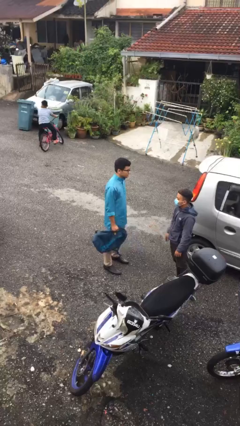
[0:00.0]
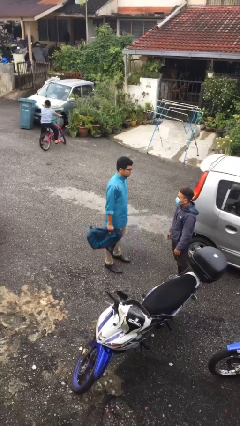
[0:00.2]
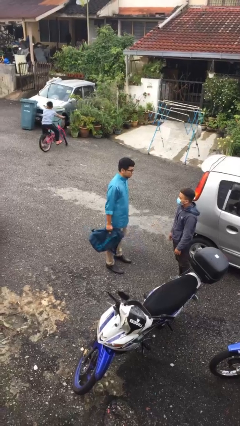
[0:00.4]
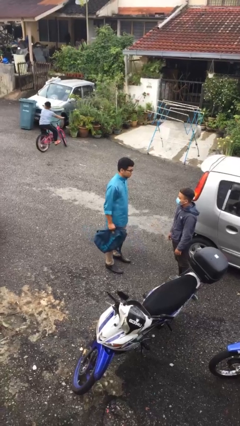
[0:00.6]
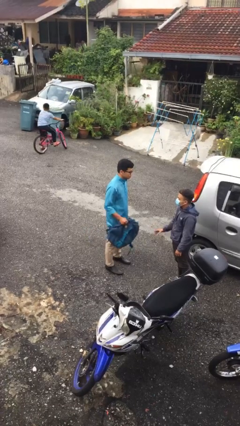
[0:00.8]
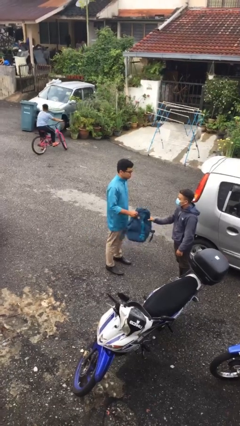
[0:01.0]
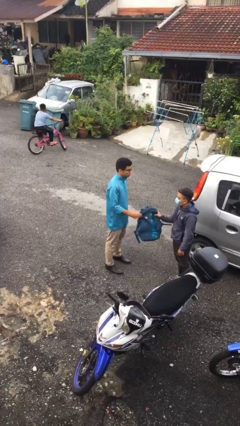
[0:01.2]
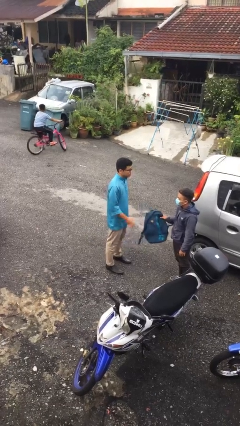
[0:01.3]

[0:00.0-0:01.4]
person transfers object to person

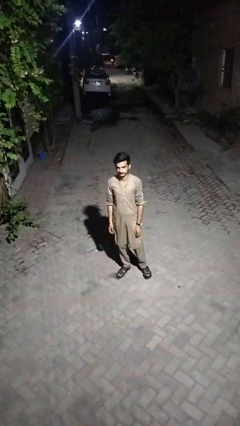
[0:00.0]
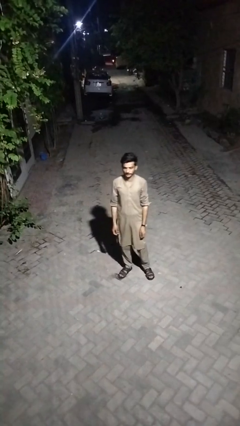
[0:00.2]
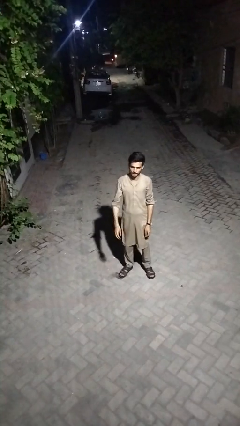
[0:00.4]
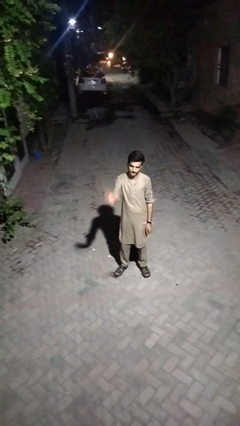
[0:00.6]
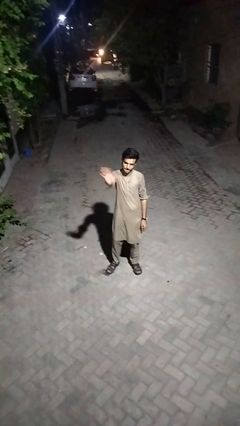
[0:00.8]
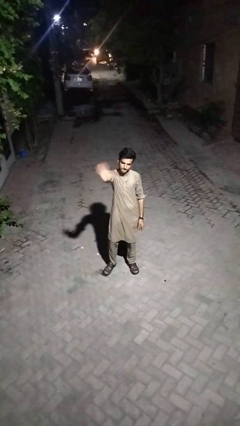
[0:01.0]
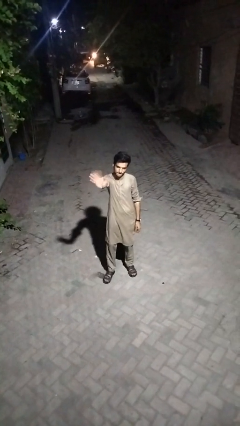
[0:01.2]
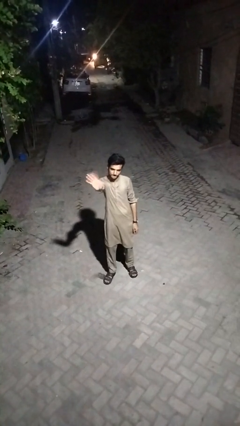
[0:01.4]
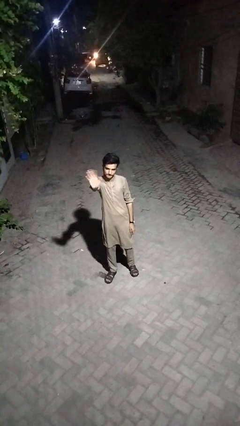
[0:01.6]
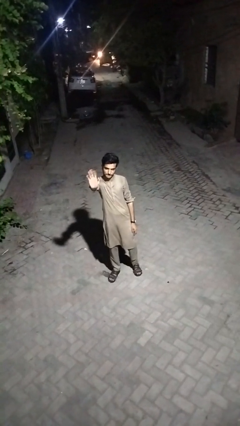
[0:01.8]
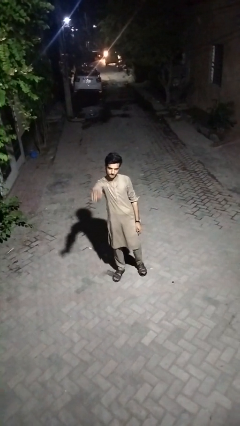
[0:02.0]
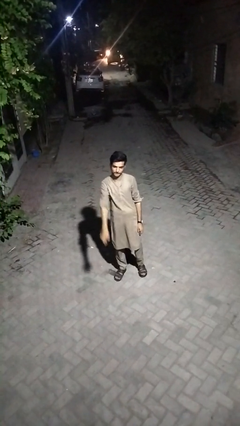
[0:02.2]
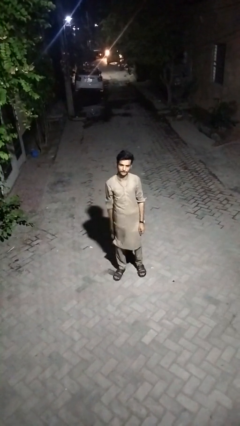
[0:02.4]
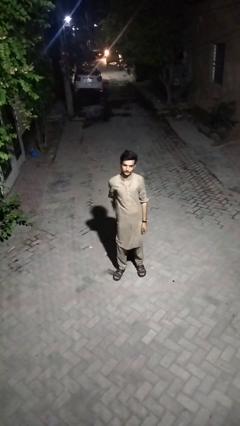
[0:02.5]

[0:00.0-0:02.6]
person waves at person

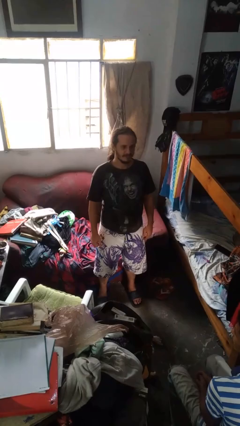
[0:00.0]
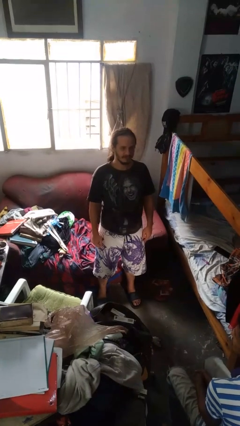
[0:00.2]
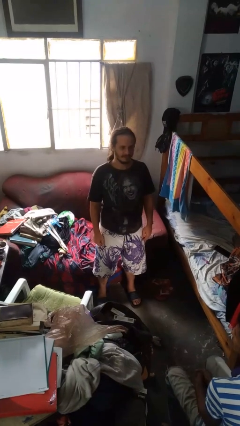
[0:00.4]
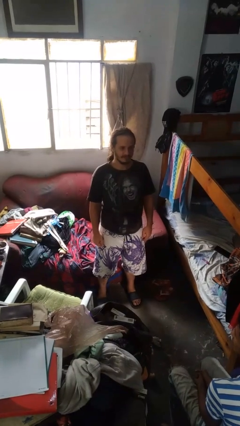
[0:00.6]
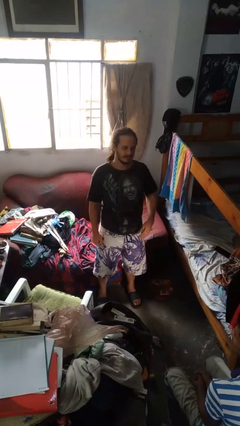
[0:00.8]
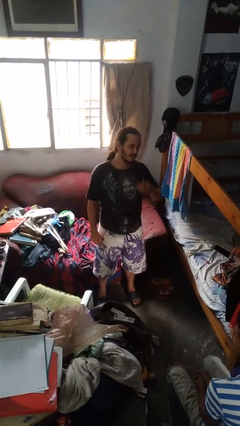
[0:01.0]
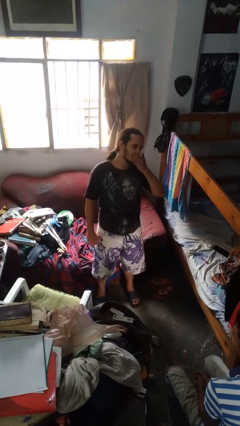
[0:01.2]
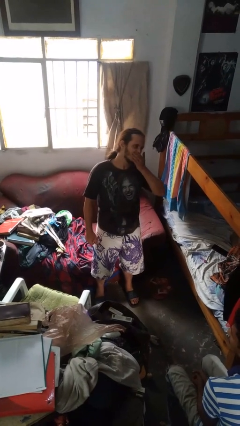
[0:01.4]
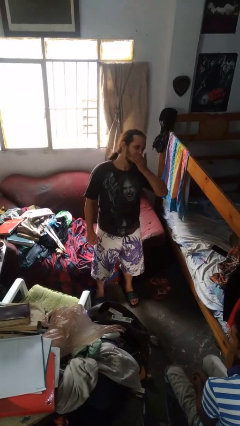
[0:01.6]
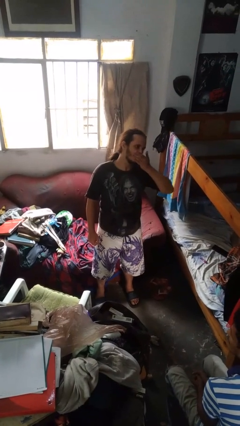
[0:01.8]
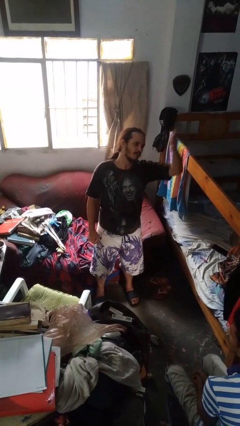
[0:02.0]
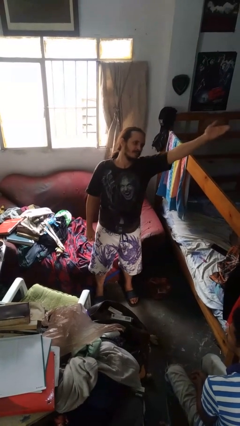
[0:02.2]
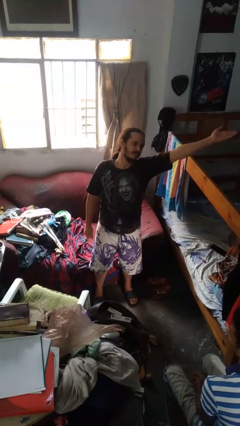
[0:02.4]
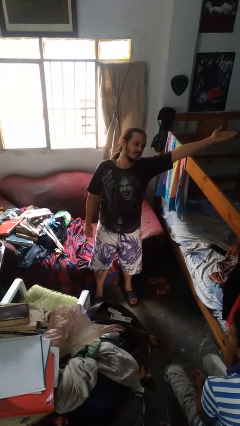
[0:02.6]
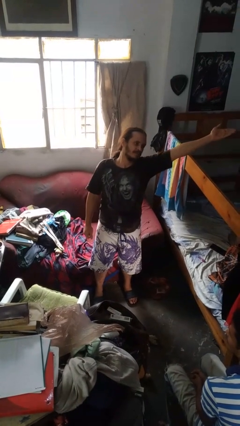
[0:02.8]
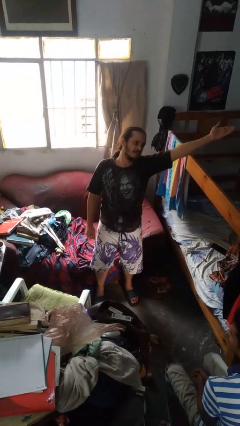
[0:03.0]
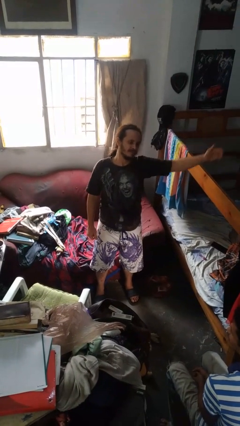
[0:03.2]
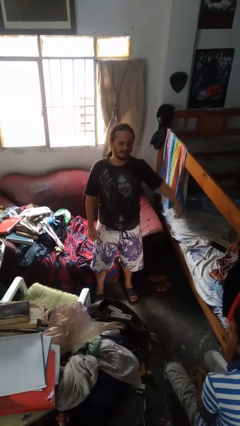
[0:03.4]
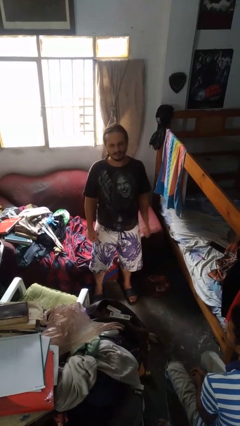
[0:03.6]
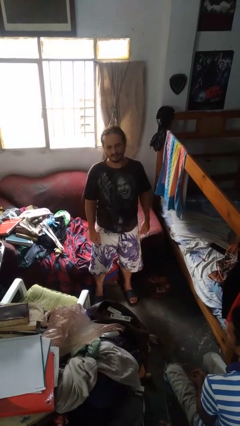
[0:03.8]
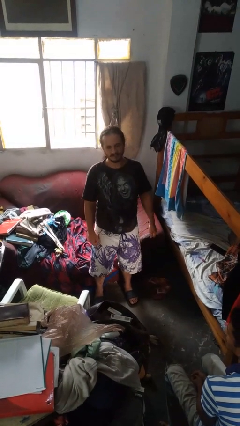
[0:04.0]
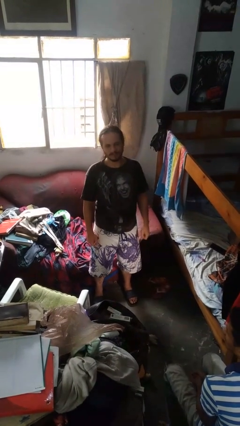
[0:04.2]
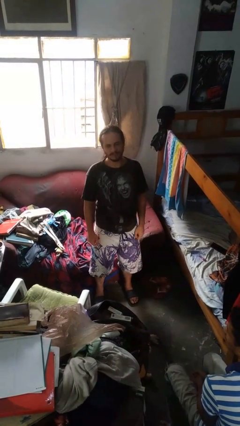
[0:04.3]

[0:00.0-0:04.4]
person gestures blow kiss

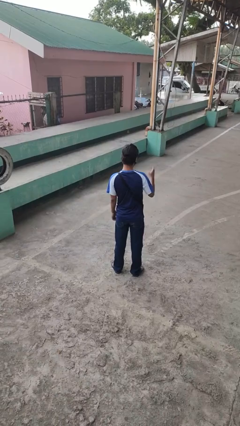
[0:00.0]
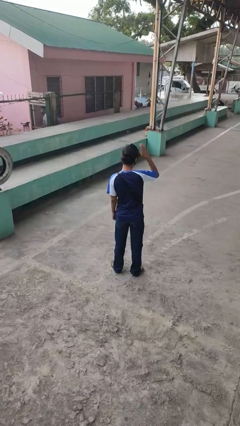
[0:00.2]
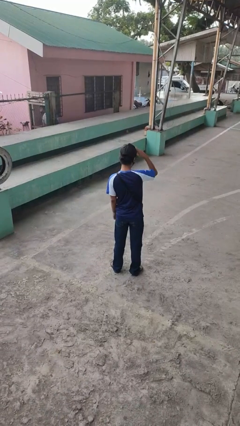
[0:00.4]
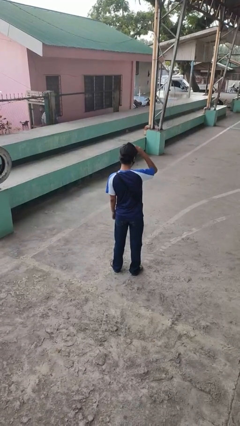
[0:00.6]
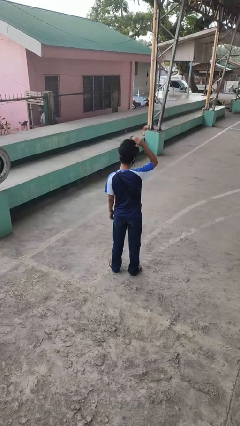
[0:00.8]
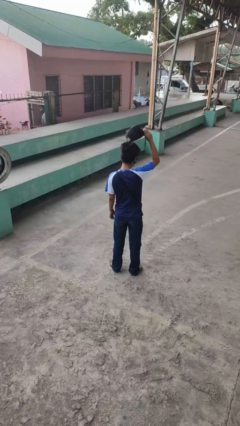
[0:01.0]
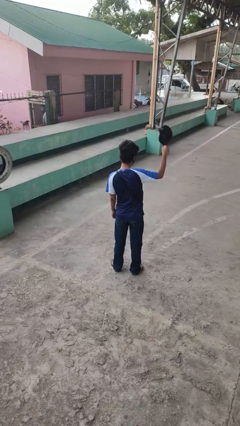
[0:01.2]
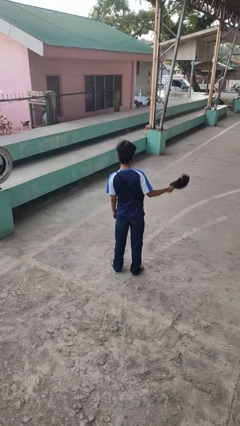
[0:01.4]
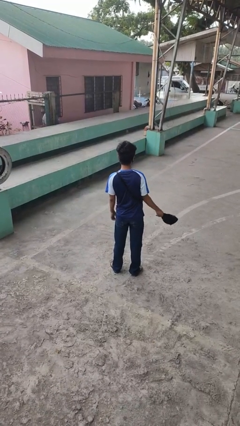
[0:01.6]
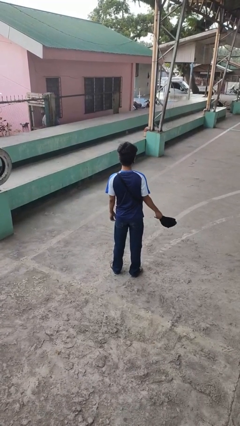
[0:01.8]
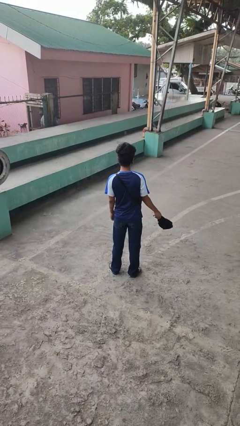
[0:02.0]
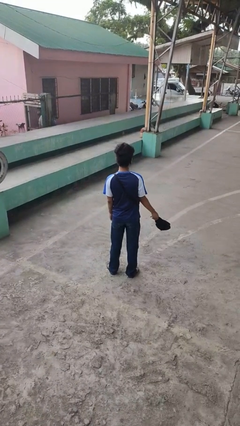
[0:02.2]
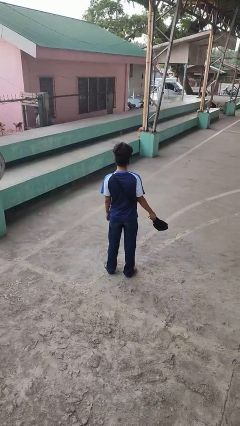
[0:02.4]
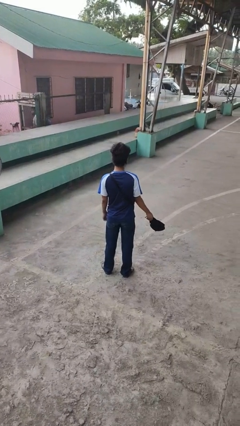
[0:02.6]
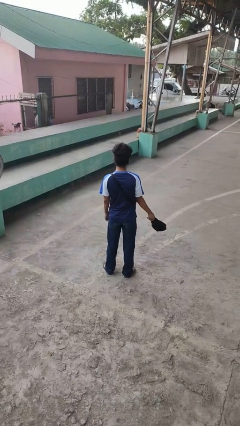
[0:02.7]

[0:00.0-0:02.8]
person takes off hat

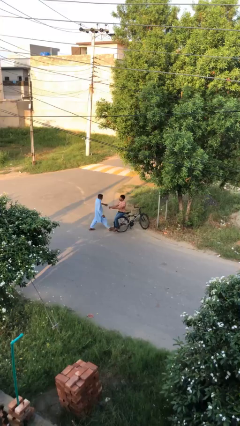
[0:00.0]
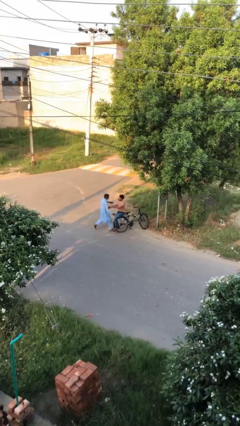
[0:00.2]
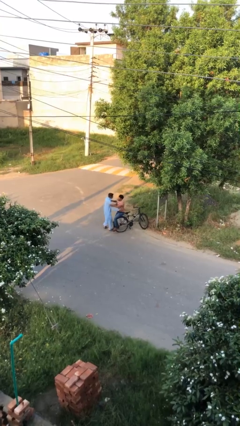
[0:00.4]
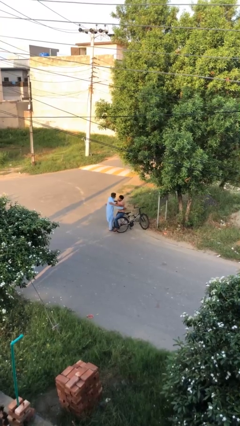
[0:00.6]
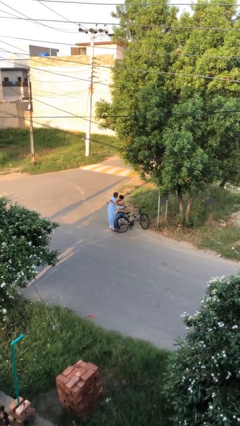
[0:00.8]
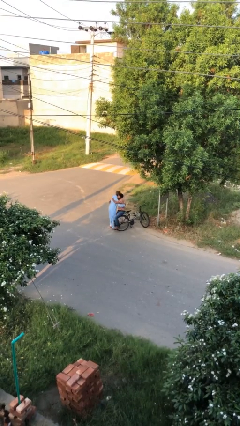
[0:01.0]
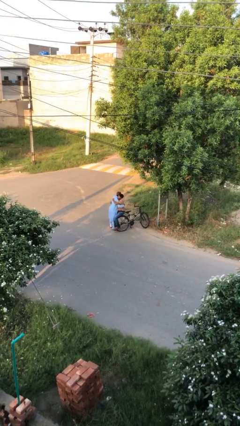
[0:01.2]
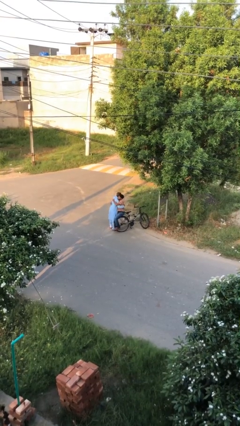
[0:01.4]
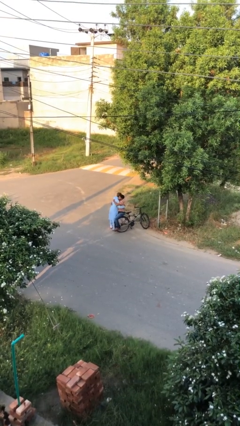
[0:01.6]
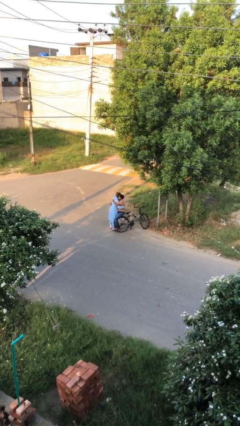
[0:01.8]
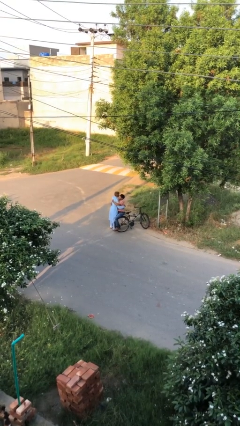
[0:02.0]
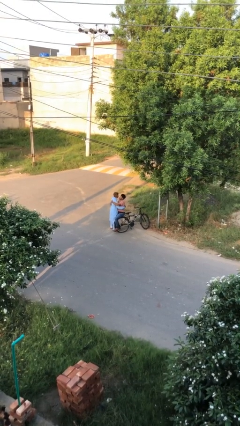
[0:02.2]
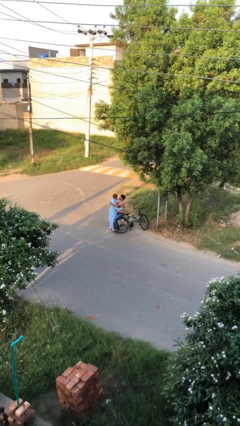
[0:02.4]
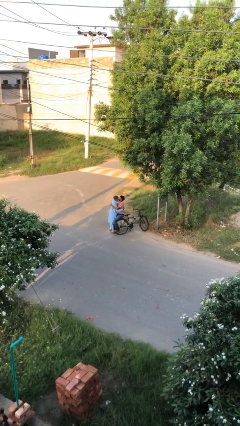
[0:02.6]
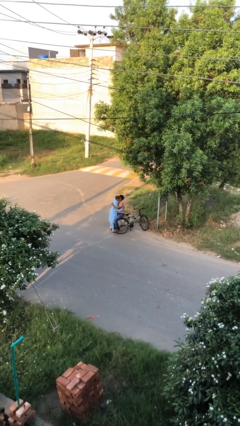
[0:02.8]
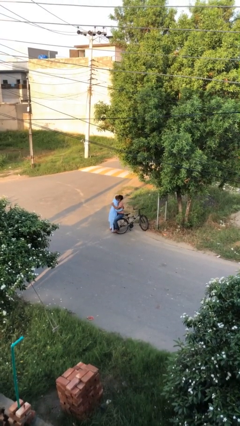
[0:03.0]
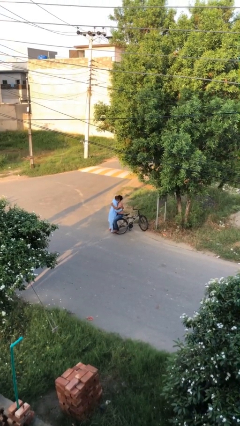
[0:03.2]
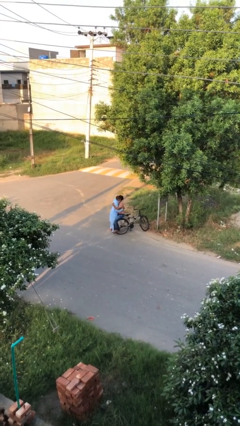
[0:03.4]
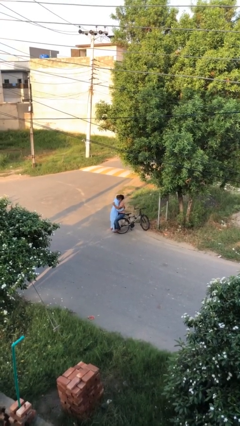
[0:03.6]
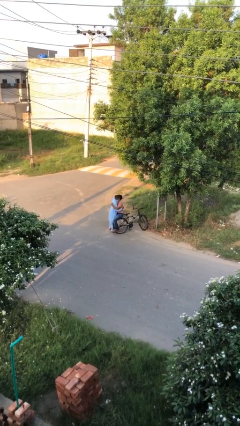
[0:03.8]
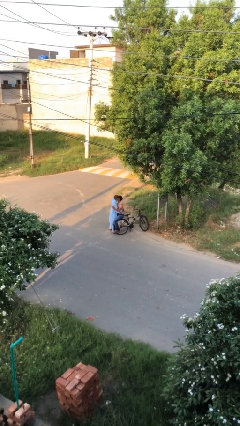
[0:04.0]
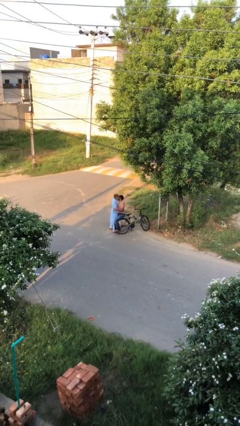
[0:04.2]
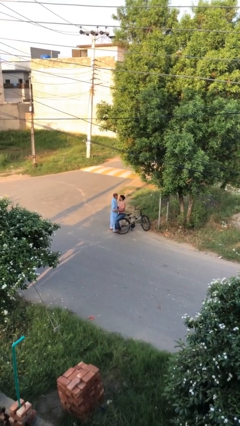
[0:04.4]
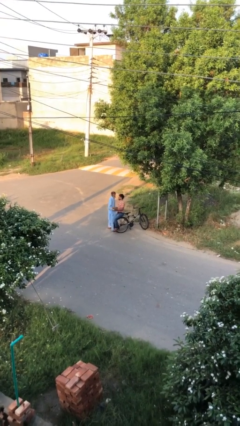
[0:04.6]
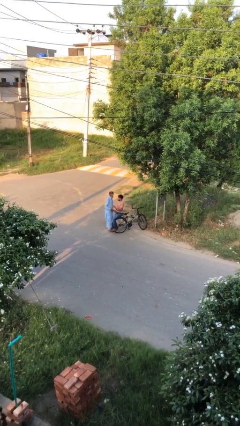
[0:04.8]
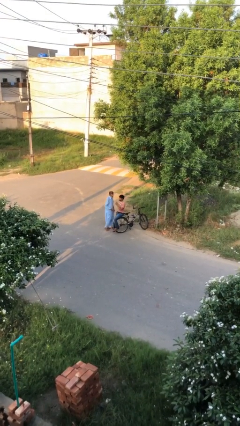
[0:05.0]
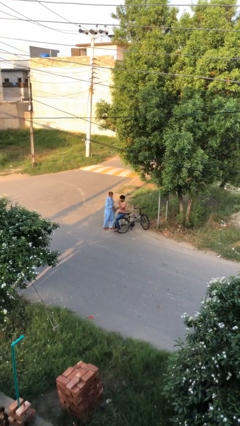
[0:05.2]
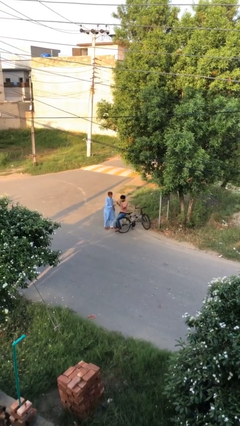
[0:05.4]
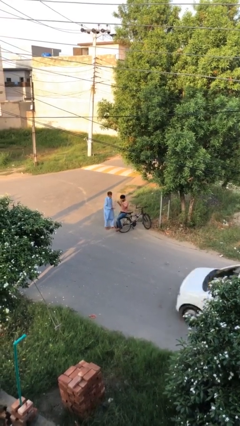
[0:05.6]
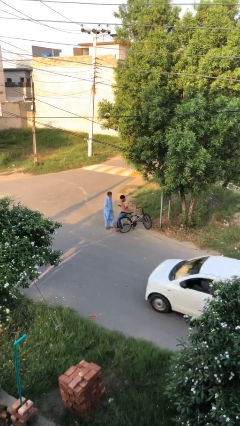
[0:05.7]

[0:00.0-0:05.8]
person embraces person

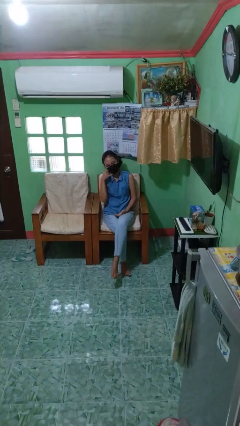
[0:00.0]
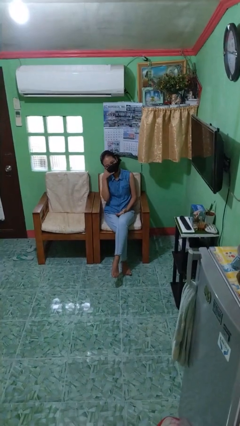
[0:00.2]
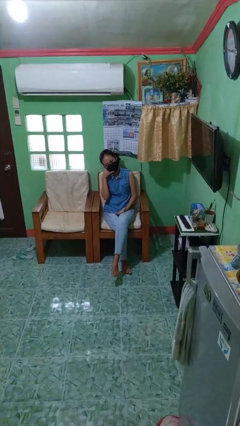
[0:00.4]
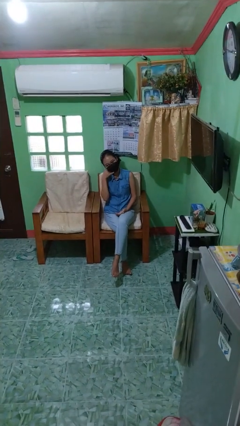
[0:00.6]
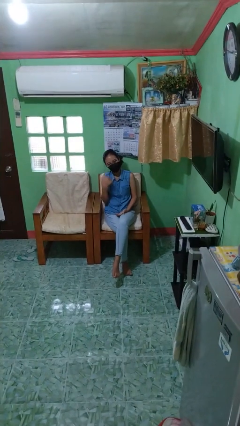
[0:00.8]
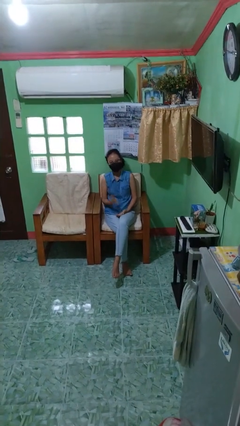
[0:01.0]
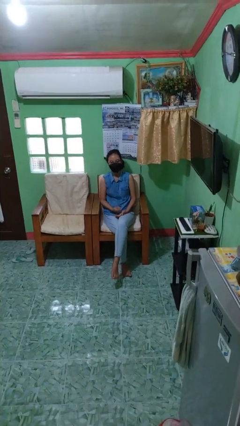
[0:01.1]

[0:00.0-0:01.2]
person gestures call me
